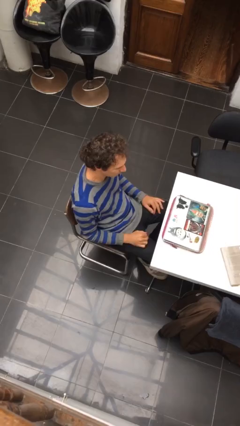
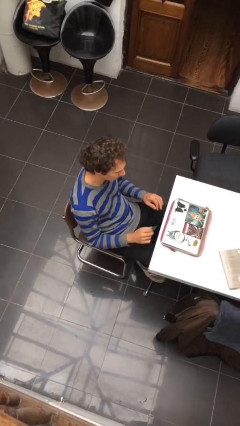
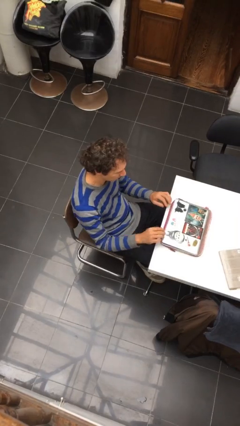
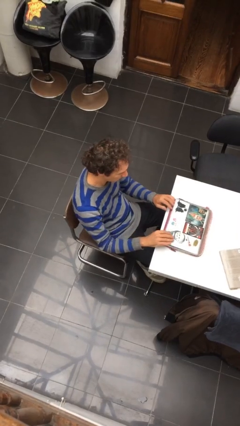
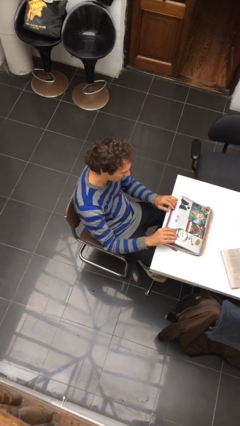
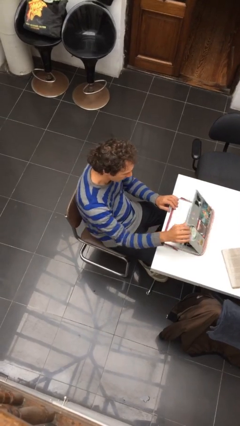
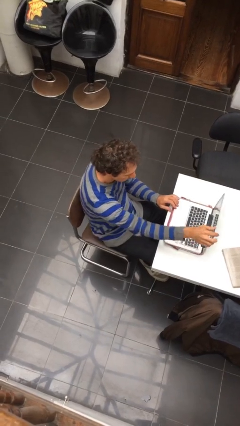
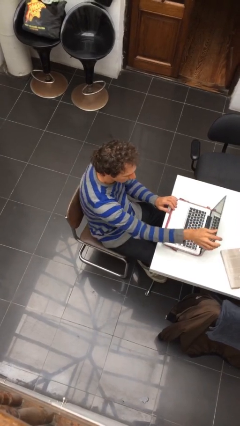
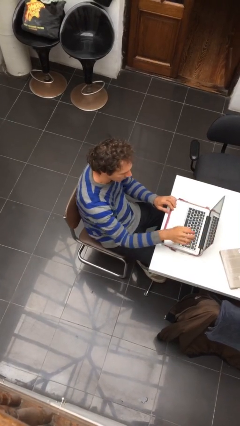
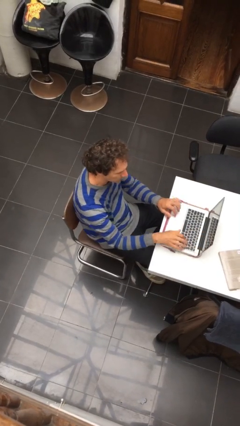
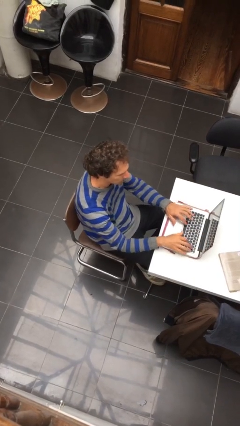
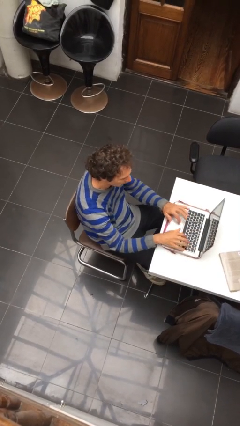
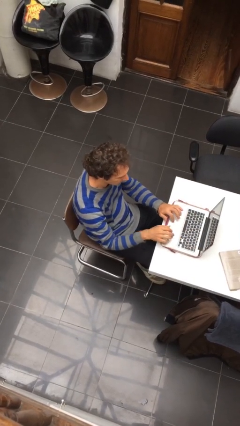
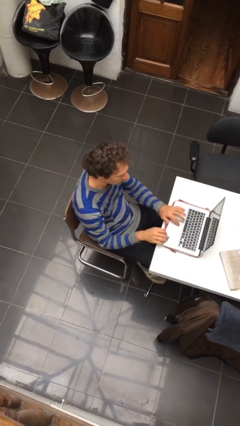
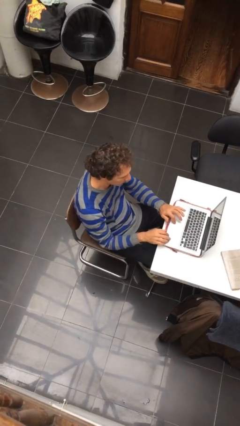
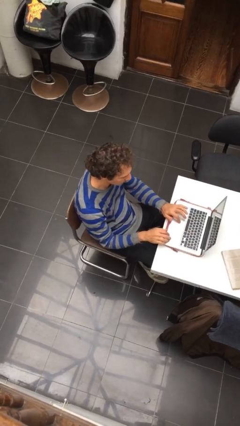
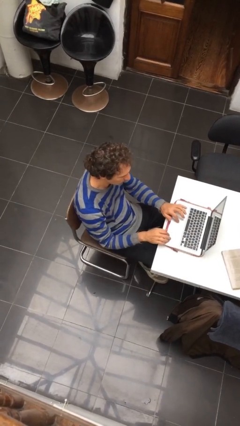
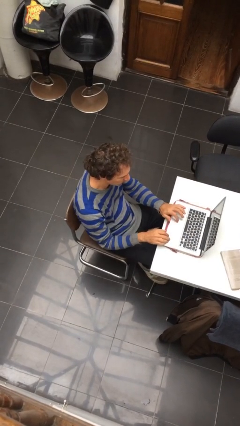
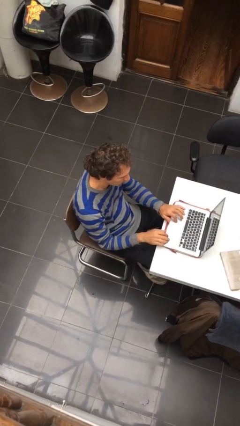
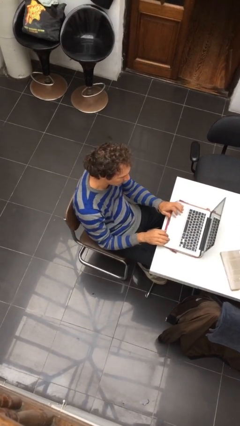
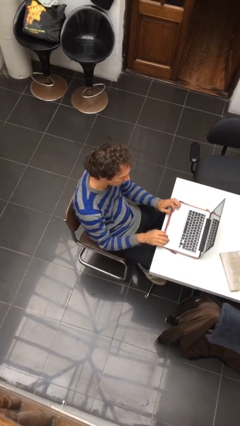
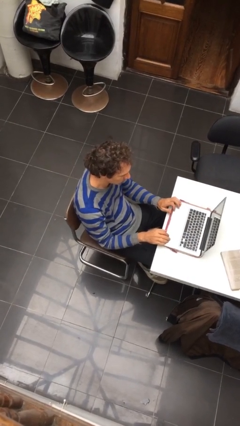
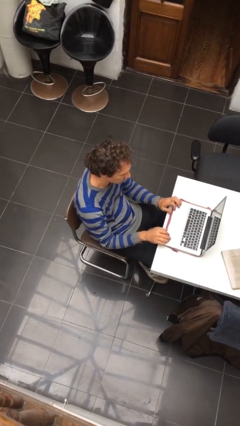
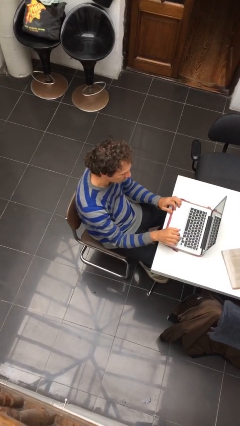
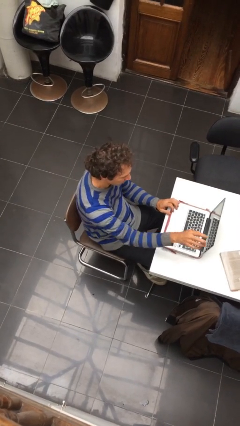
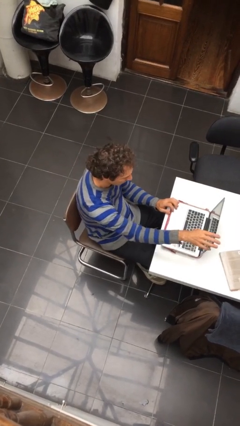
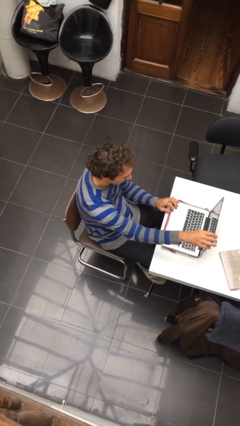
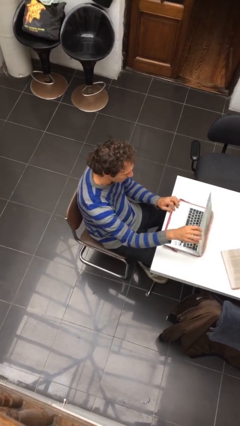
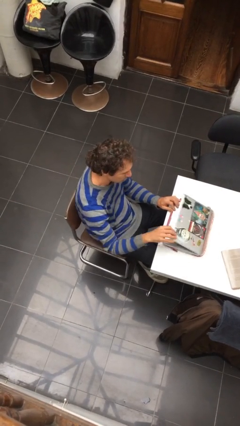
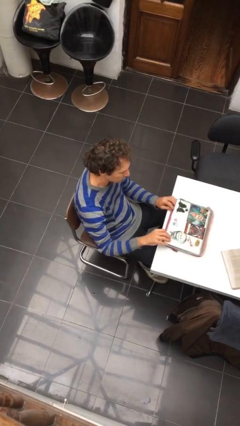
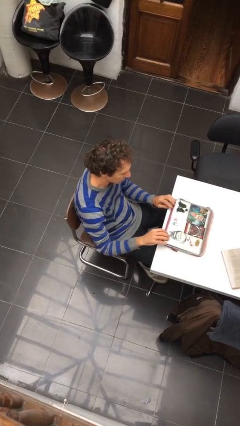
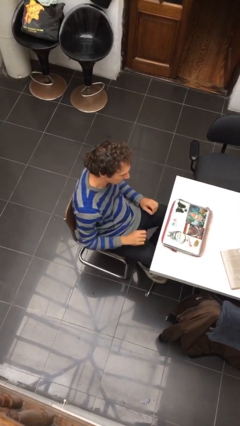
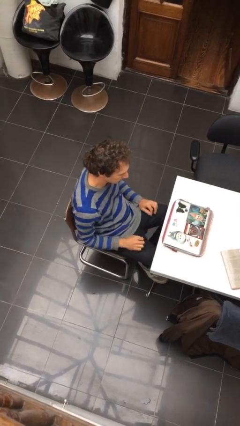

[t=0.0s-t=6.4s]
person interacts with laptop

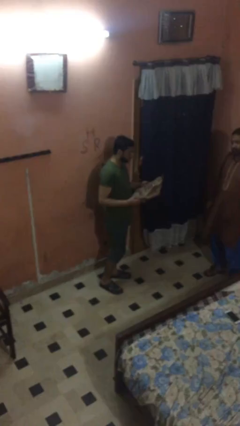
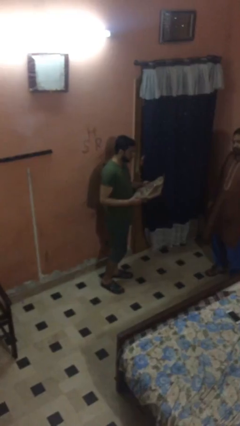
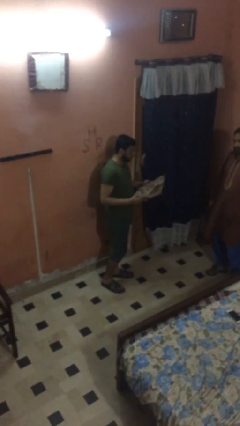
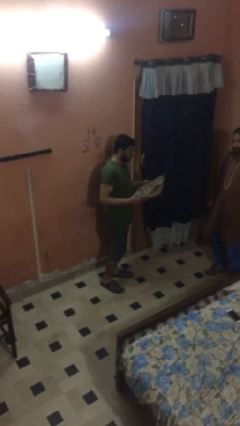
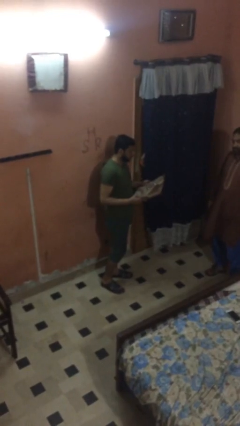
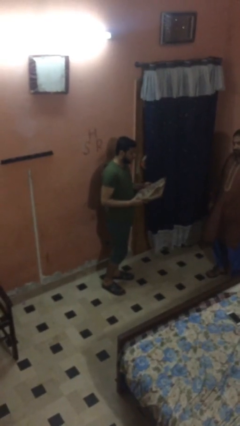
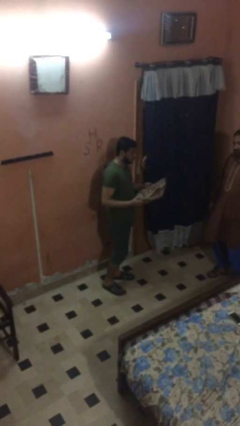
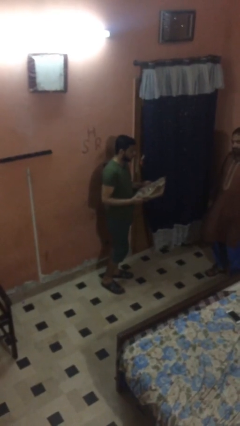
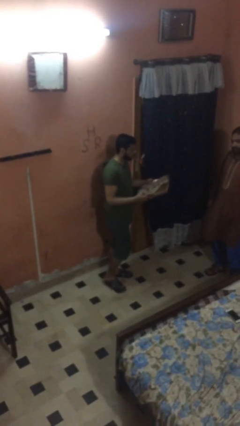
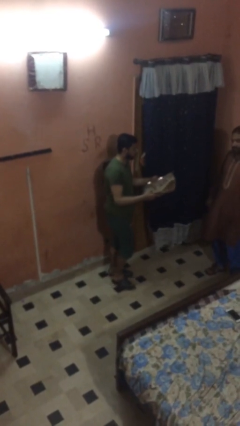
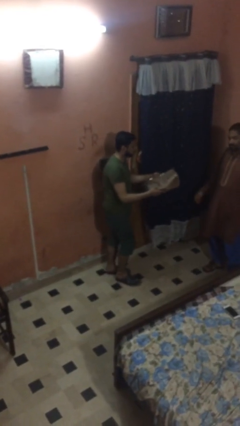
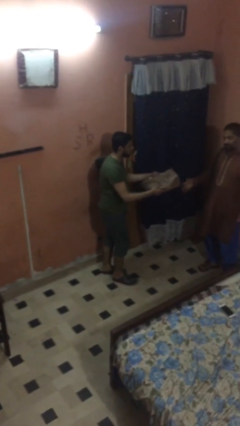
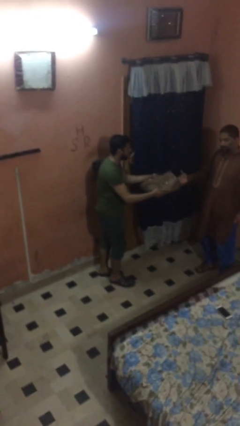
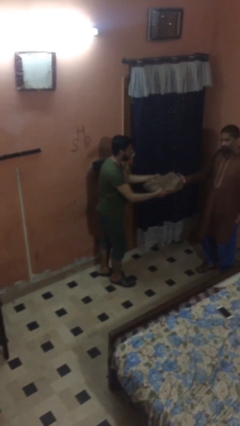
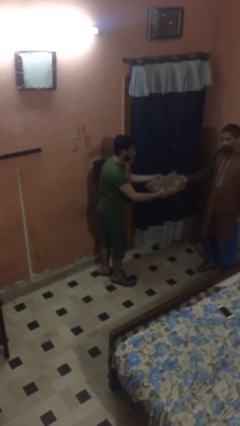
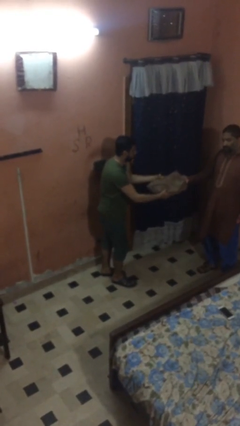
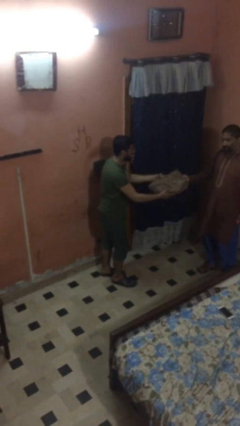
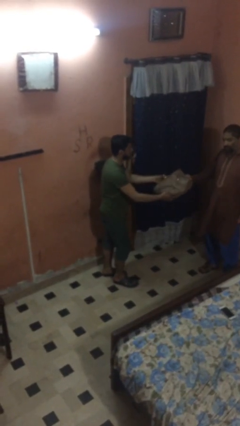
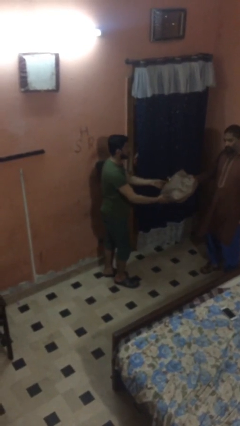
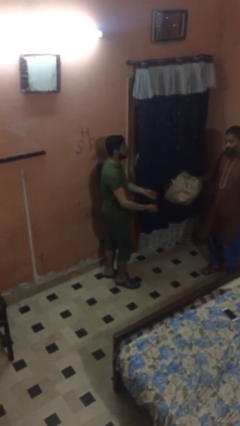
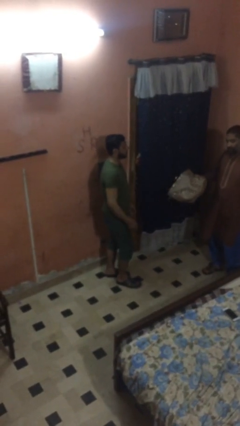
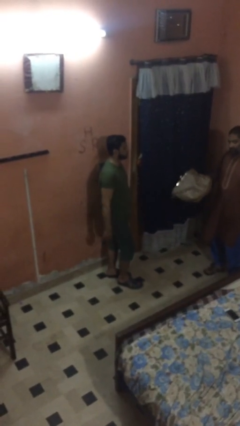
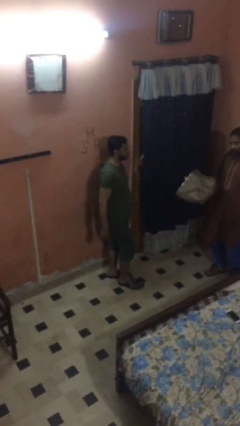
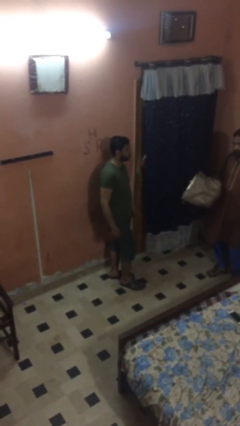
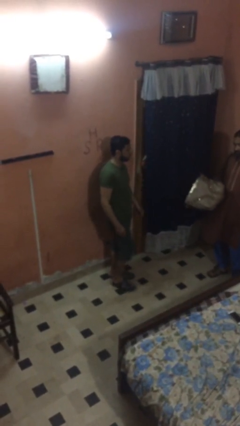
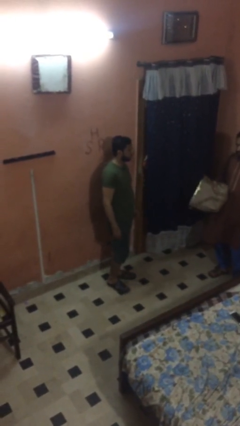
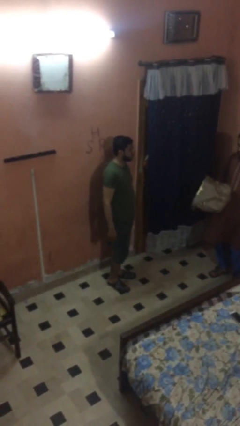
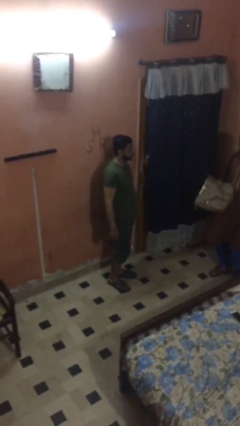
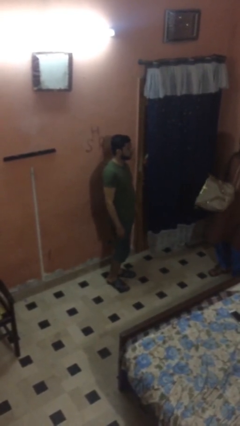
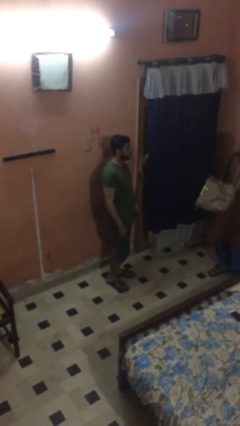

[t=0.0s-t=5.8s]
person transfers object to person

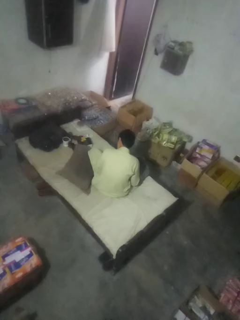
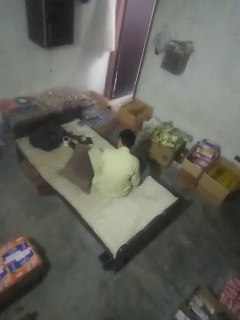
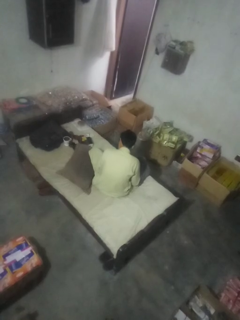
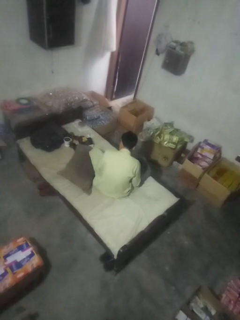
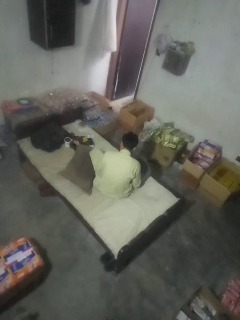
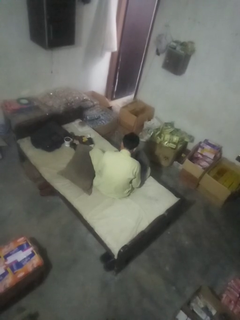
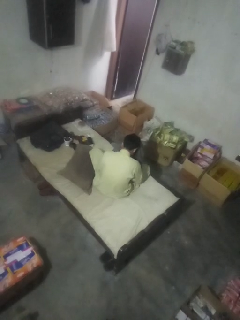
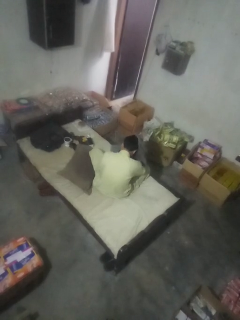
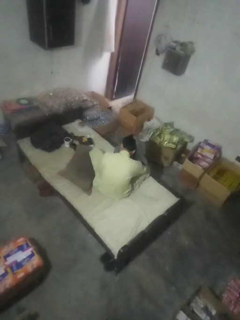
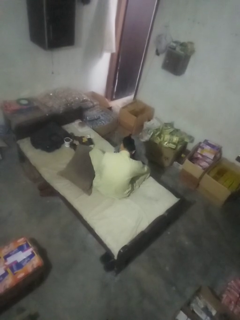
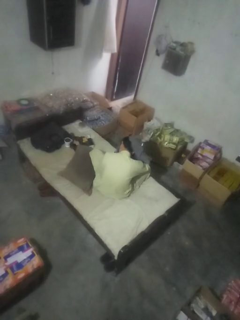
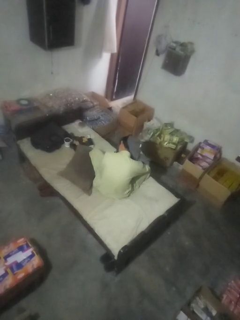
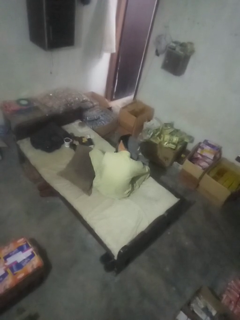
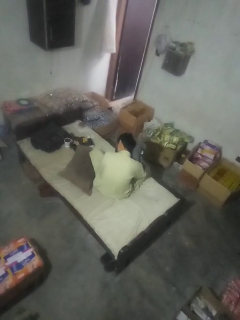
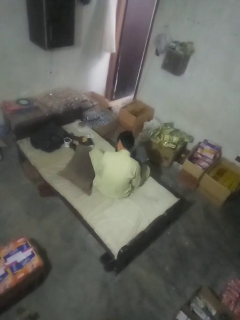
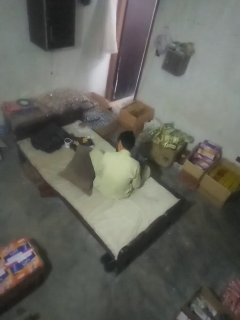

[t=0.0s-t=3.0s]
person dries hair with towel

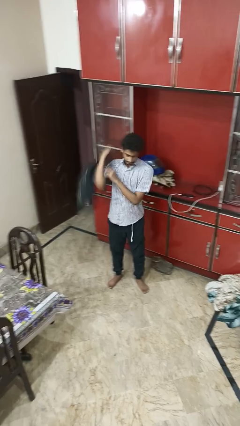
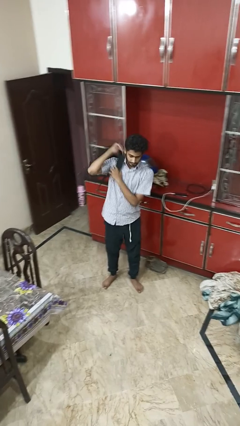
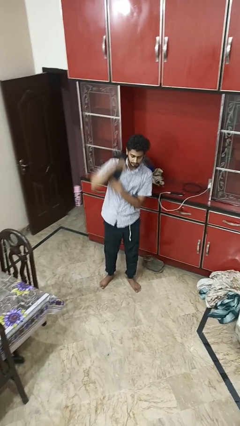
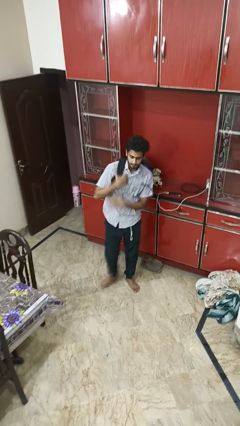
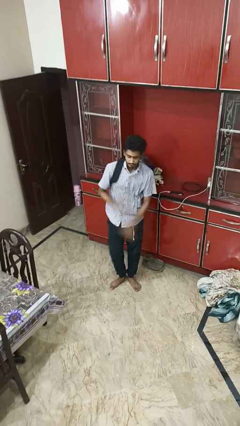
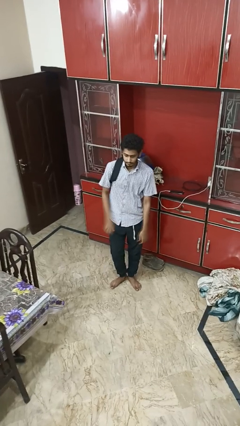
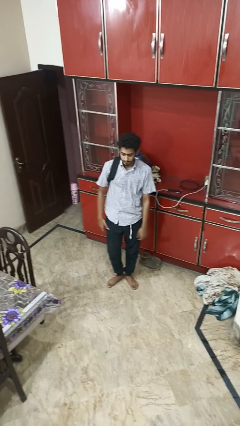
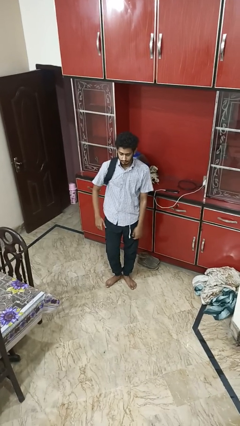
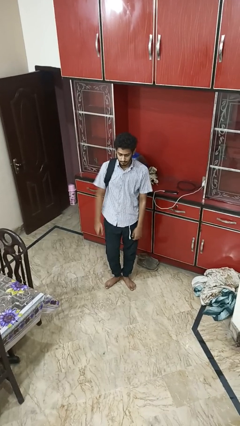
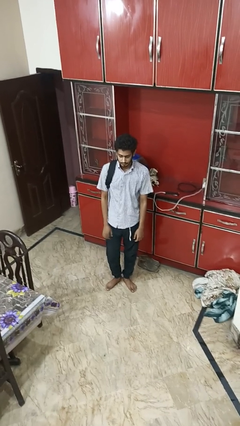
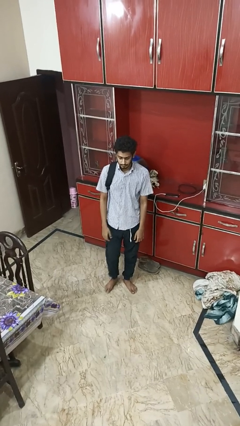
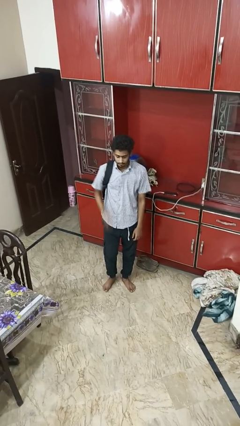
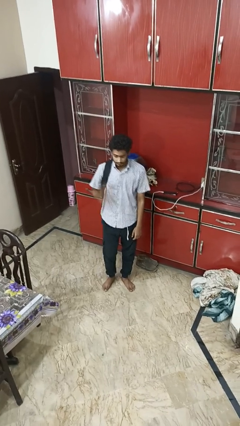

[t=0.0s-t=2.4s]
person puts on backpack

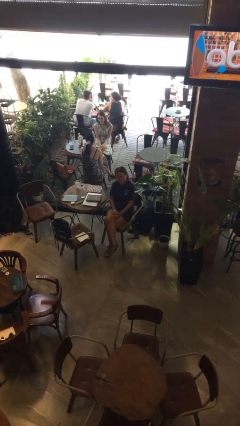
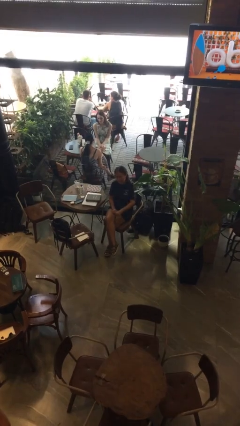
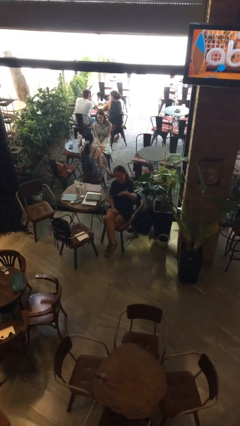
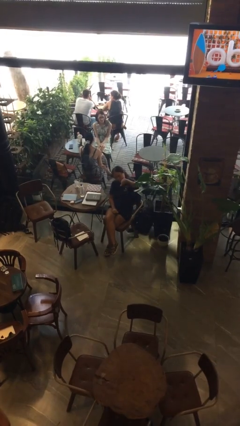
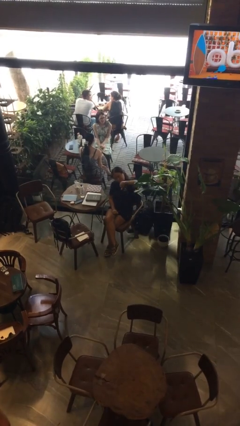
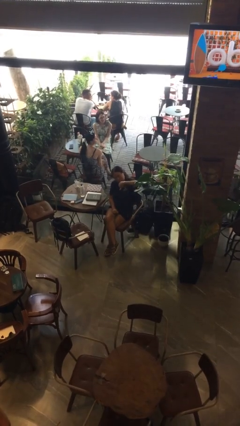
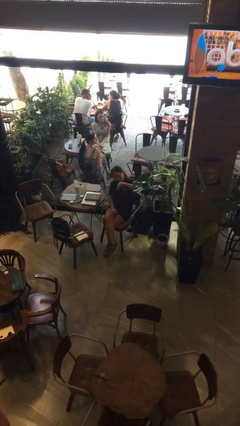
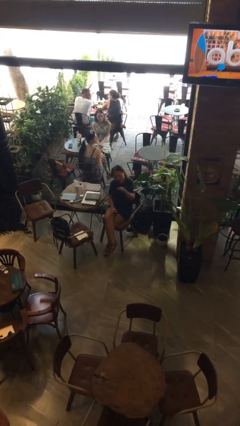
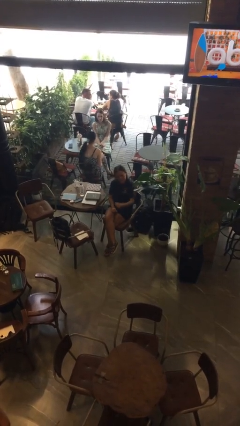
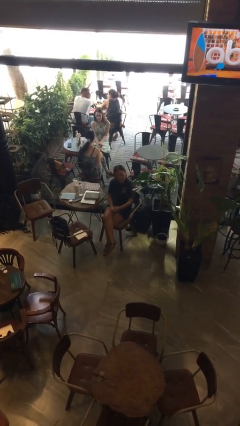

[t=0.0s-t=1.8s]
person gestures thumbs down
